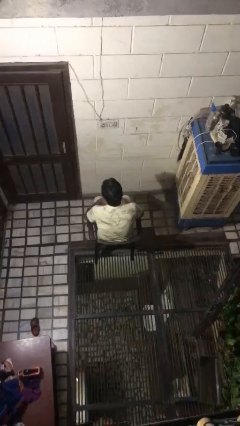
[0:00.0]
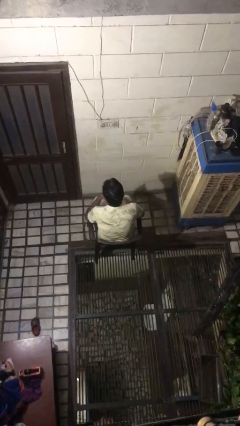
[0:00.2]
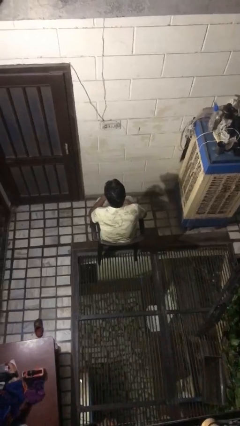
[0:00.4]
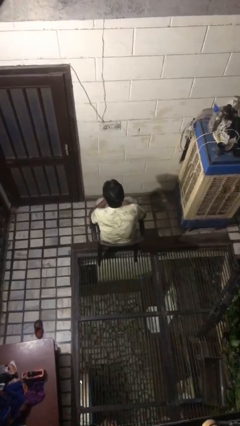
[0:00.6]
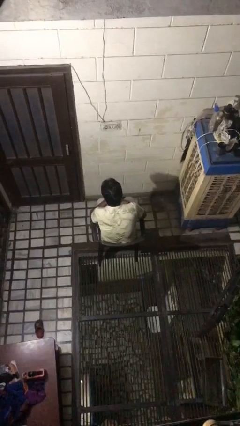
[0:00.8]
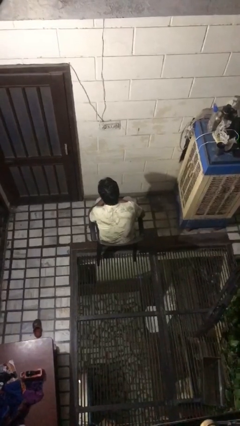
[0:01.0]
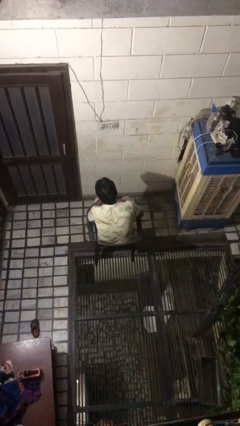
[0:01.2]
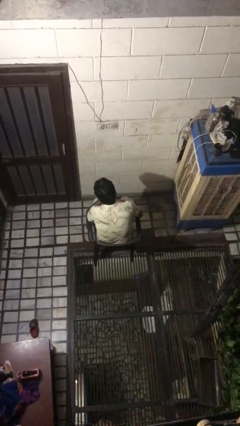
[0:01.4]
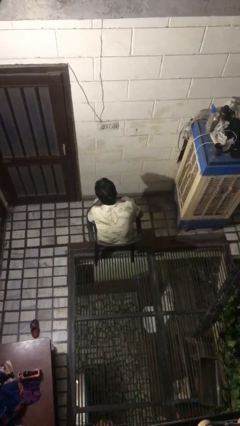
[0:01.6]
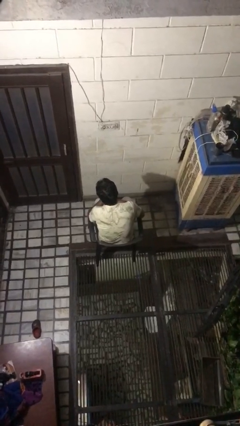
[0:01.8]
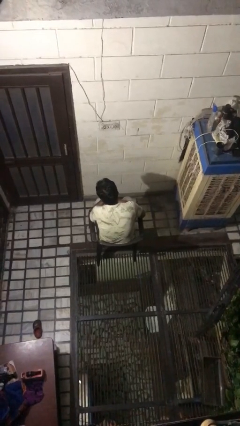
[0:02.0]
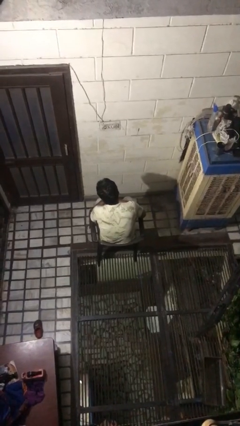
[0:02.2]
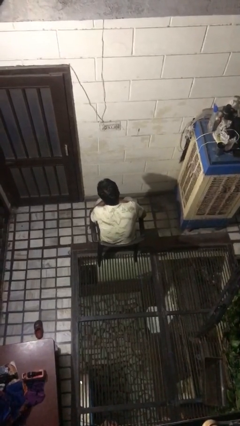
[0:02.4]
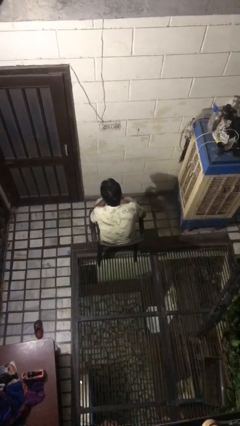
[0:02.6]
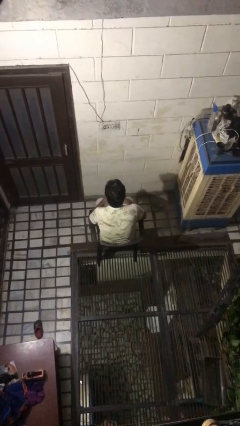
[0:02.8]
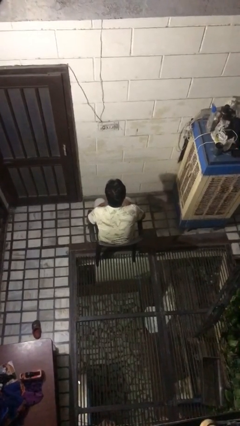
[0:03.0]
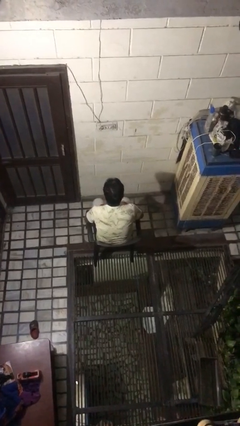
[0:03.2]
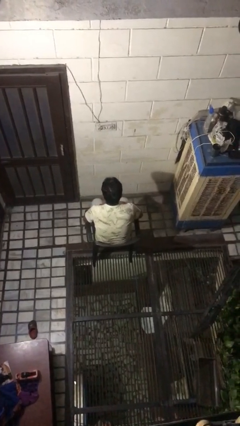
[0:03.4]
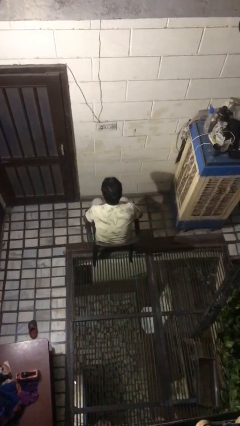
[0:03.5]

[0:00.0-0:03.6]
person strokes chin

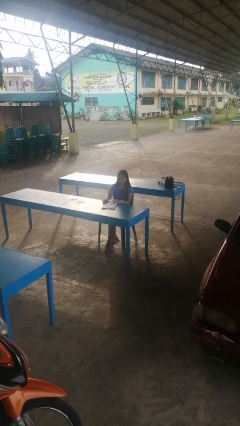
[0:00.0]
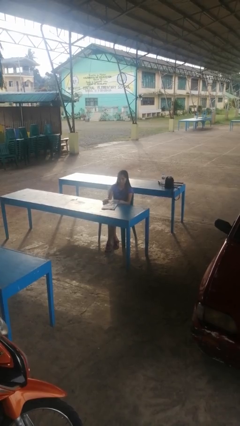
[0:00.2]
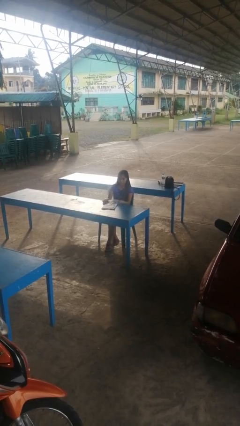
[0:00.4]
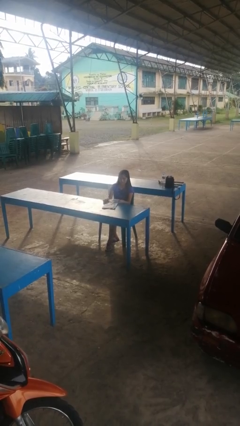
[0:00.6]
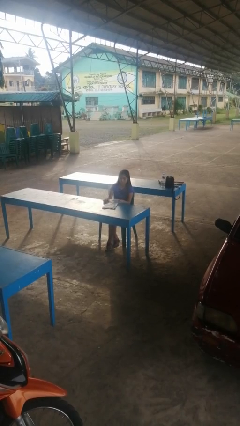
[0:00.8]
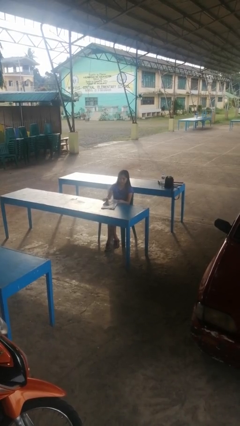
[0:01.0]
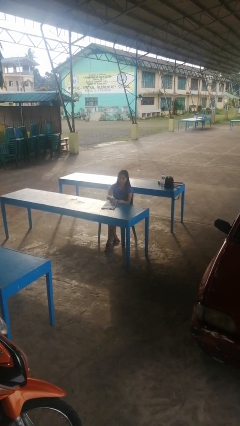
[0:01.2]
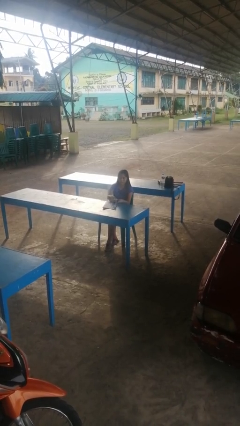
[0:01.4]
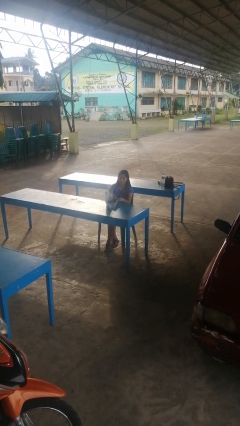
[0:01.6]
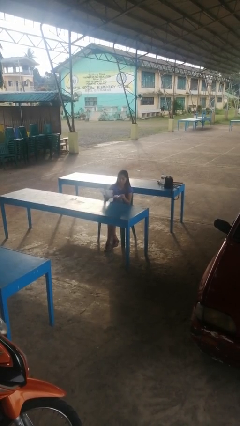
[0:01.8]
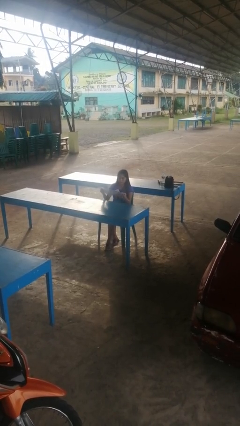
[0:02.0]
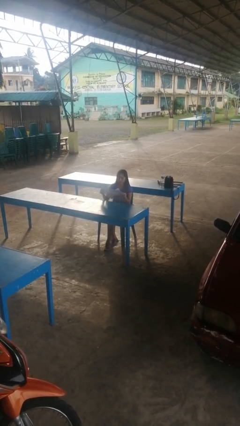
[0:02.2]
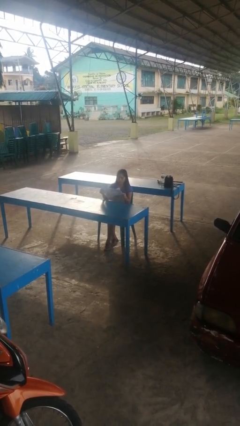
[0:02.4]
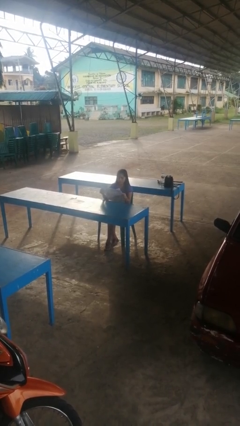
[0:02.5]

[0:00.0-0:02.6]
person reads newspaper

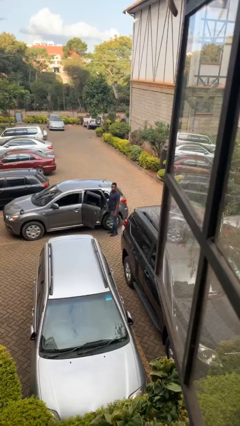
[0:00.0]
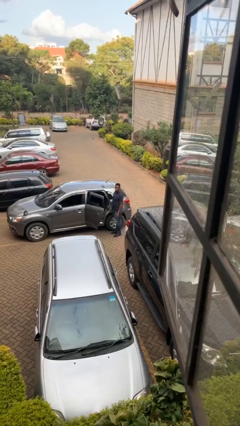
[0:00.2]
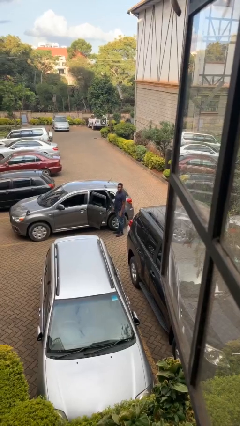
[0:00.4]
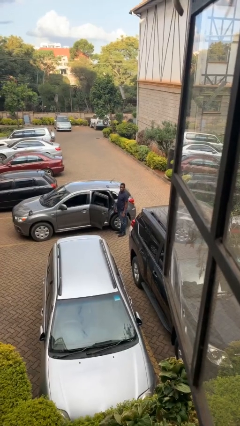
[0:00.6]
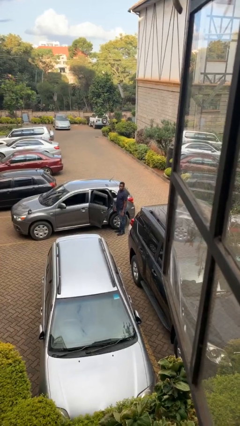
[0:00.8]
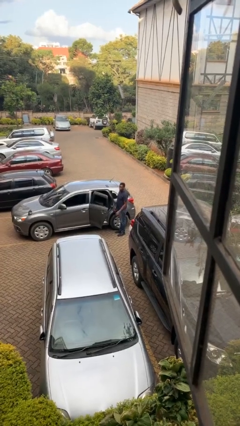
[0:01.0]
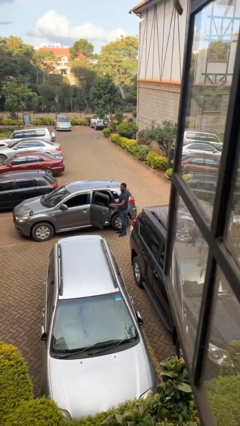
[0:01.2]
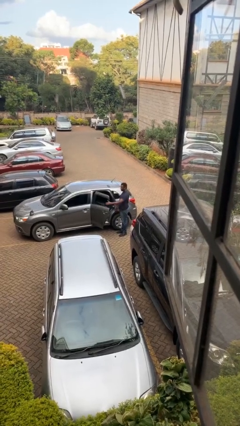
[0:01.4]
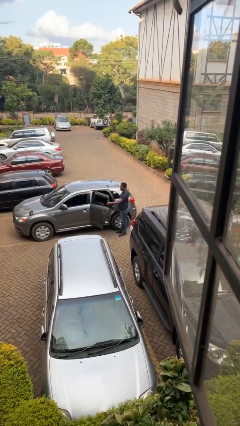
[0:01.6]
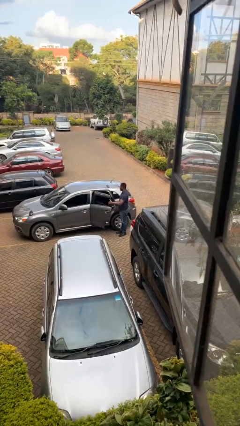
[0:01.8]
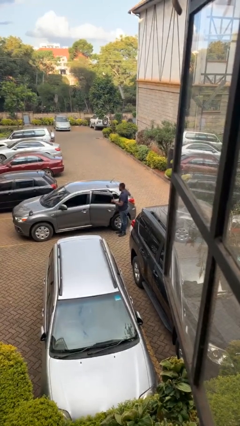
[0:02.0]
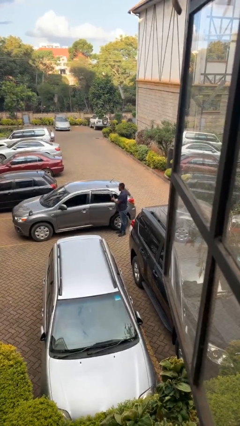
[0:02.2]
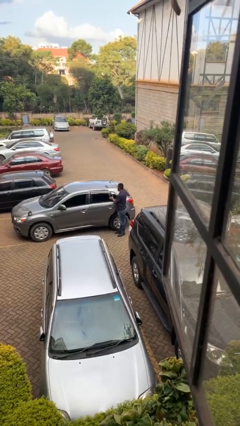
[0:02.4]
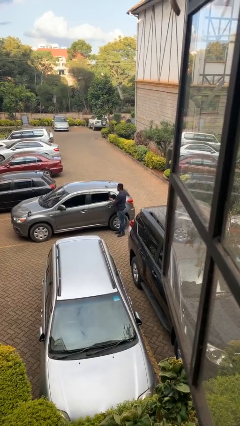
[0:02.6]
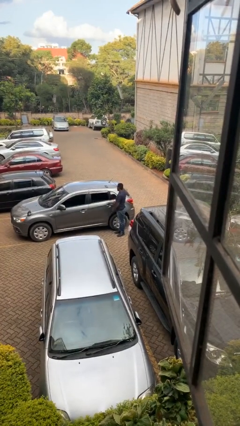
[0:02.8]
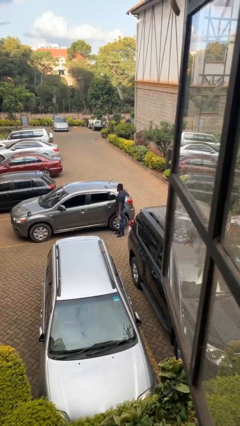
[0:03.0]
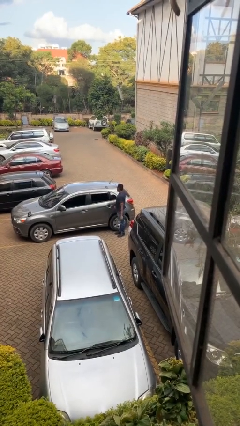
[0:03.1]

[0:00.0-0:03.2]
person closes car door

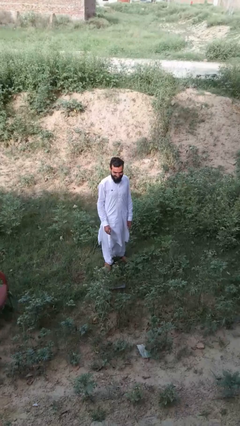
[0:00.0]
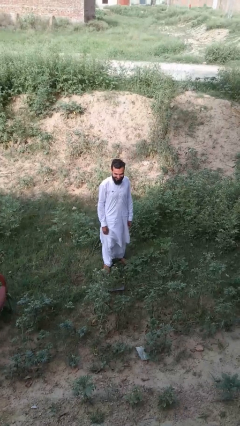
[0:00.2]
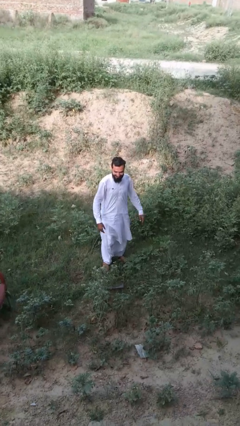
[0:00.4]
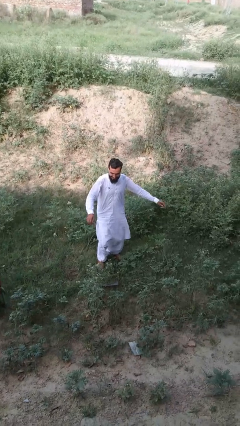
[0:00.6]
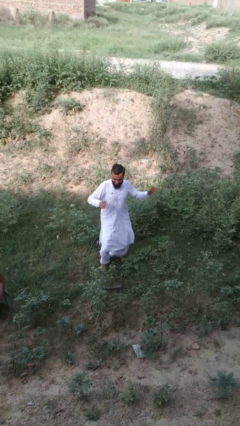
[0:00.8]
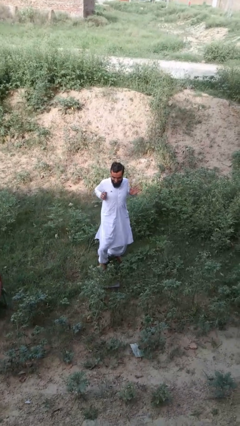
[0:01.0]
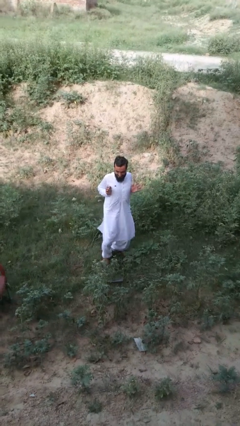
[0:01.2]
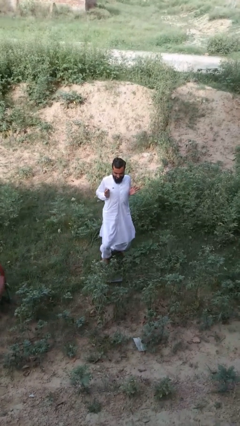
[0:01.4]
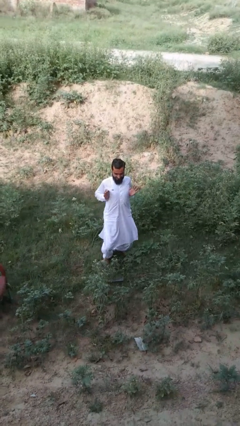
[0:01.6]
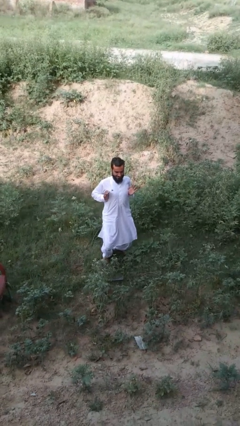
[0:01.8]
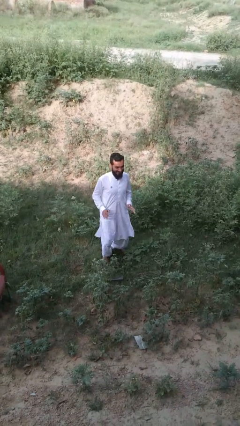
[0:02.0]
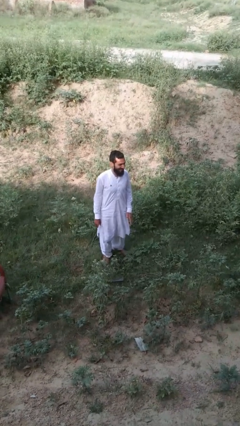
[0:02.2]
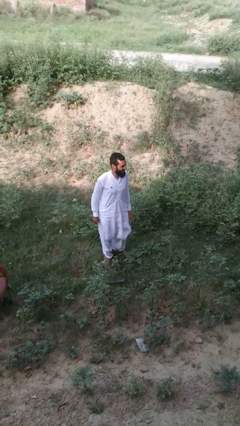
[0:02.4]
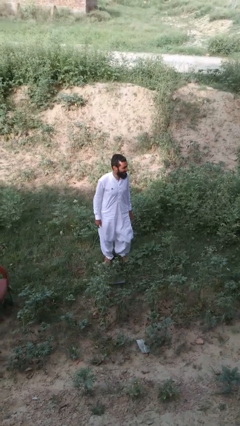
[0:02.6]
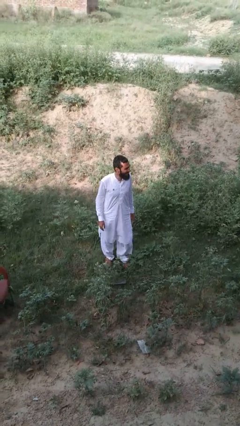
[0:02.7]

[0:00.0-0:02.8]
person dances in place

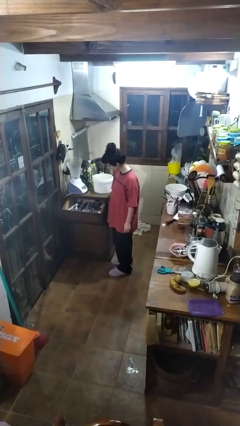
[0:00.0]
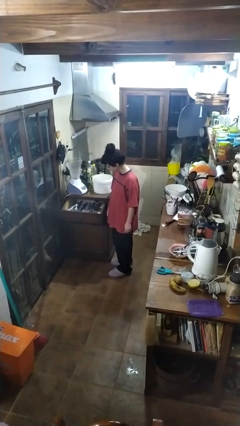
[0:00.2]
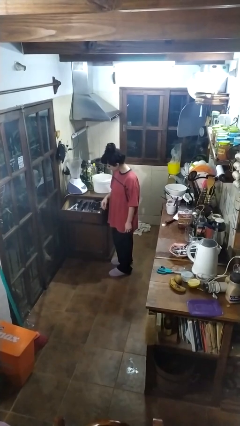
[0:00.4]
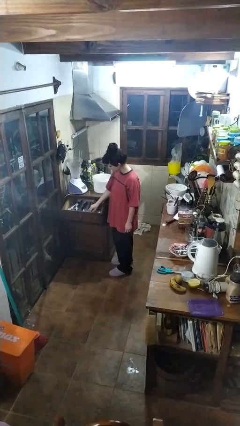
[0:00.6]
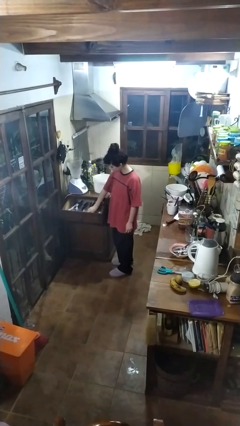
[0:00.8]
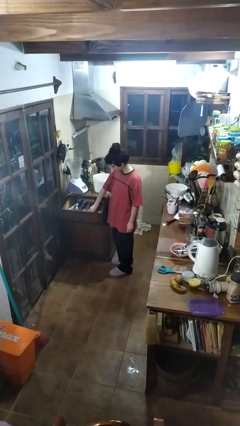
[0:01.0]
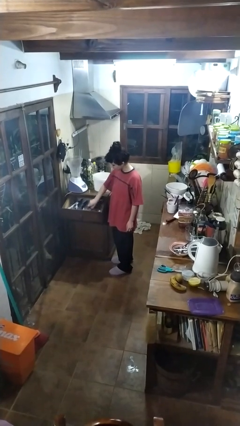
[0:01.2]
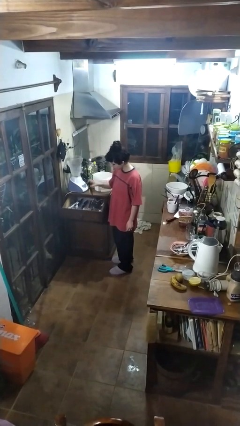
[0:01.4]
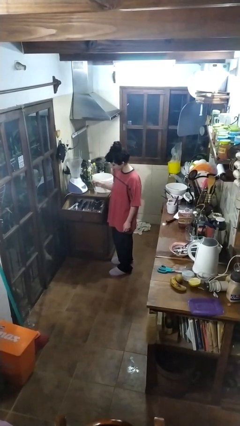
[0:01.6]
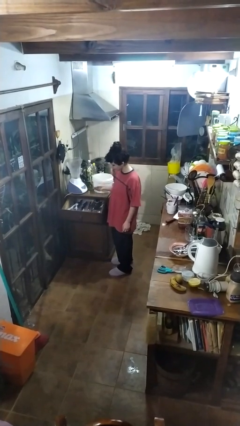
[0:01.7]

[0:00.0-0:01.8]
person takes object from kitchen drawer

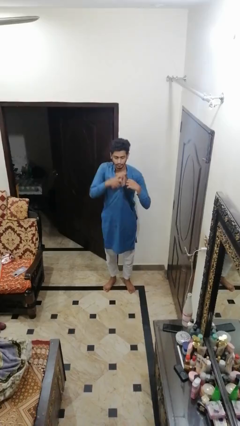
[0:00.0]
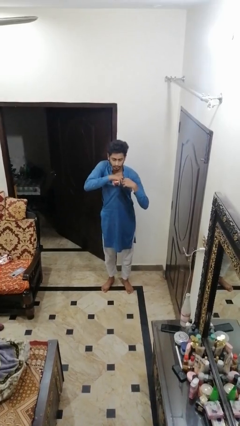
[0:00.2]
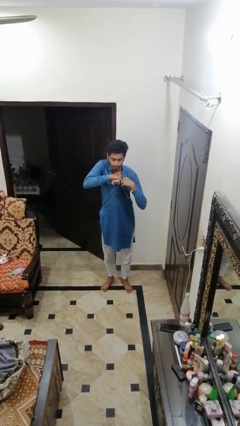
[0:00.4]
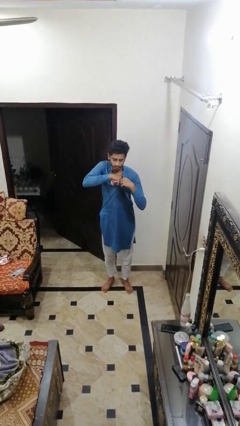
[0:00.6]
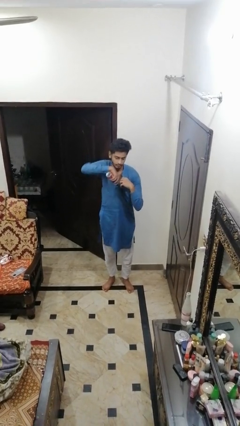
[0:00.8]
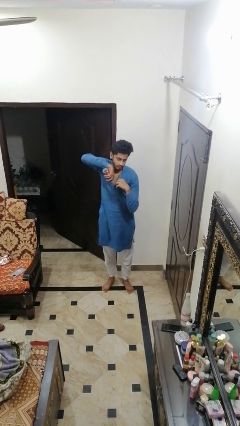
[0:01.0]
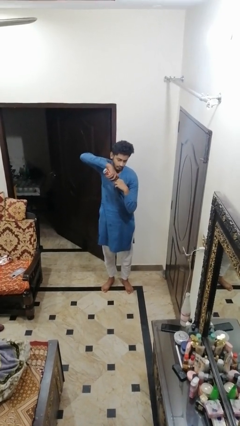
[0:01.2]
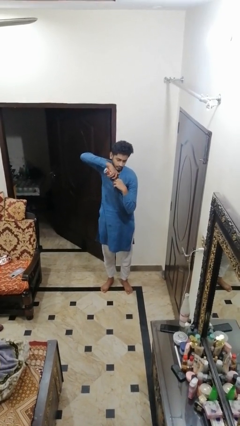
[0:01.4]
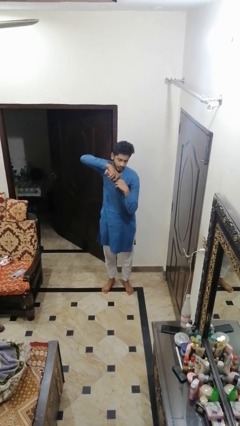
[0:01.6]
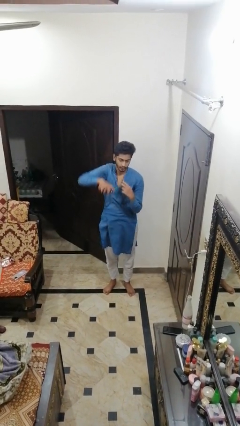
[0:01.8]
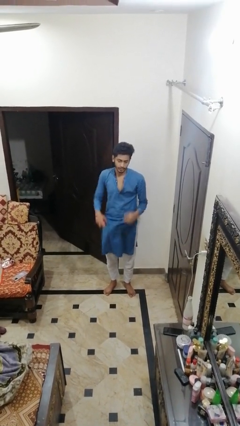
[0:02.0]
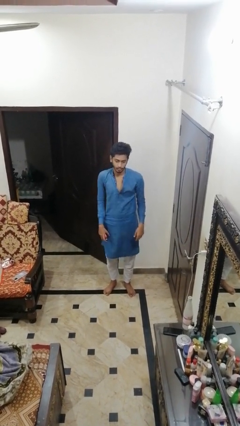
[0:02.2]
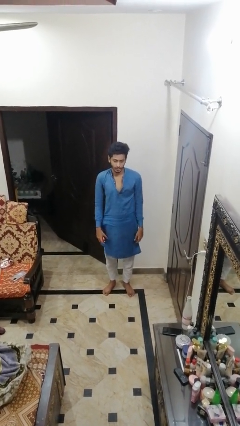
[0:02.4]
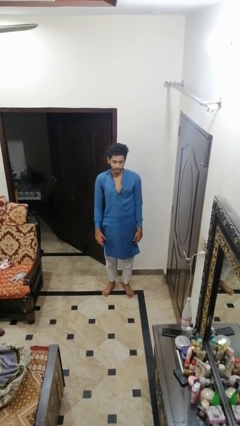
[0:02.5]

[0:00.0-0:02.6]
person applies deodorant

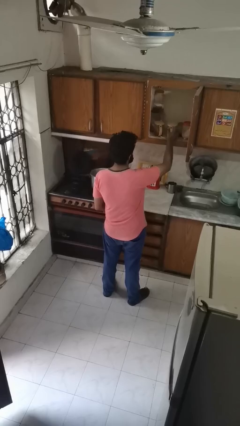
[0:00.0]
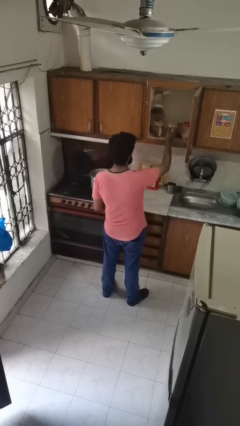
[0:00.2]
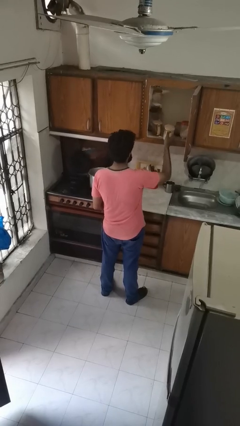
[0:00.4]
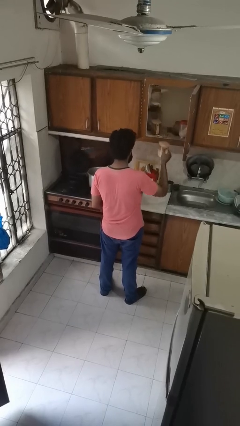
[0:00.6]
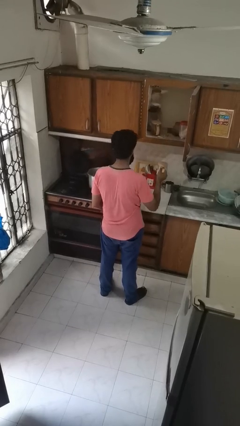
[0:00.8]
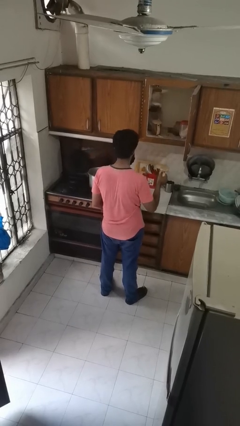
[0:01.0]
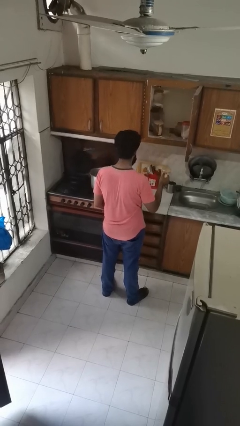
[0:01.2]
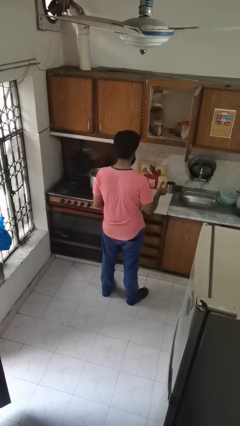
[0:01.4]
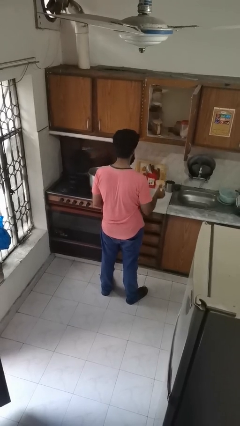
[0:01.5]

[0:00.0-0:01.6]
person picks up object from cabinet
